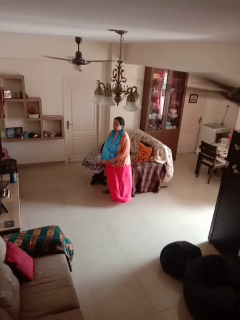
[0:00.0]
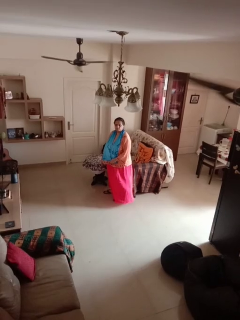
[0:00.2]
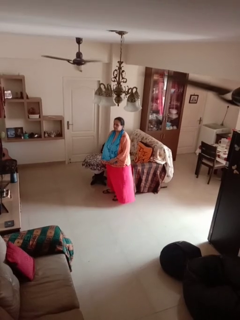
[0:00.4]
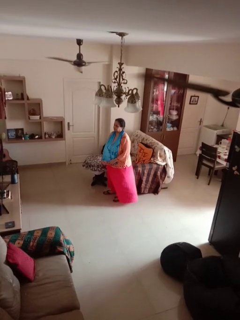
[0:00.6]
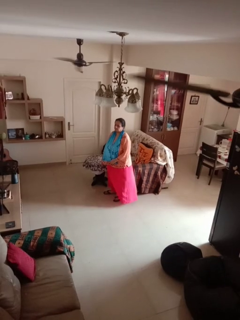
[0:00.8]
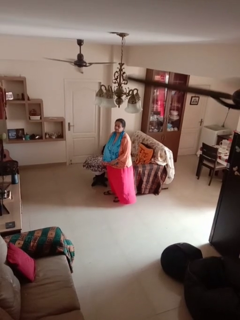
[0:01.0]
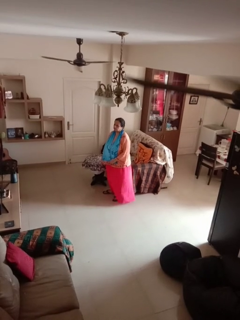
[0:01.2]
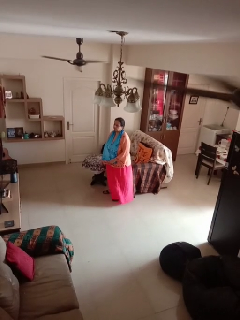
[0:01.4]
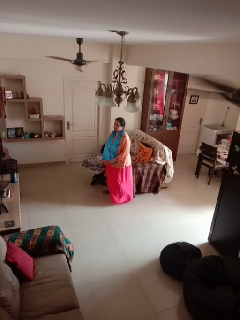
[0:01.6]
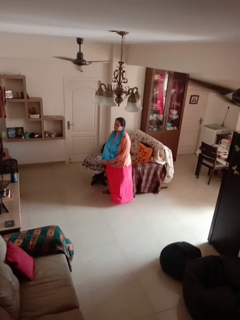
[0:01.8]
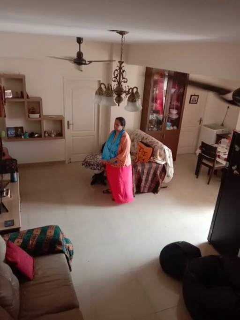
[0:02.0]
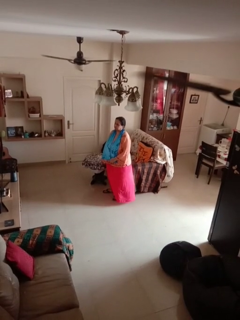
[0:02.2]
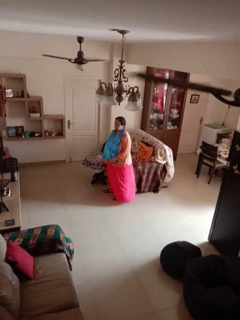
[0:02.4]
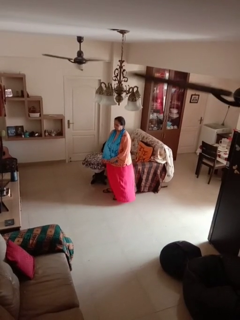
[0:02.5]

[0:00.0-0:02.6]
person shakes head

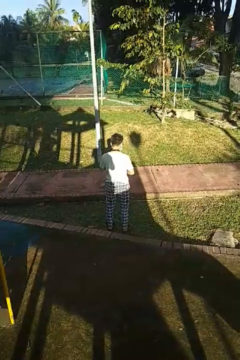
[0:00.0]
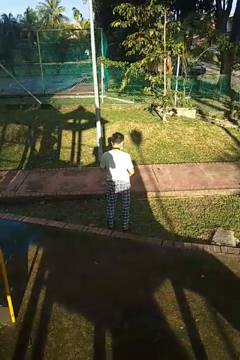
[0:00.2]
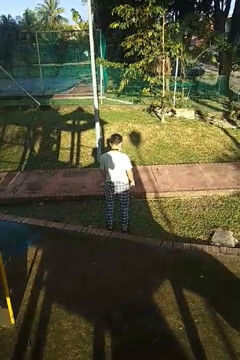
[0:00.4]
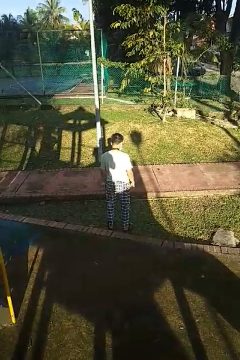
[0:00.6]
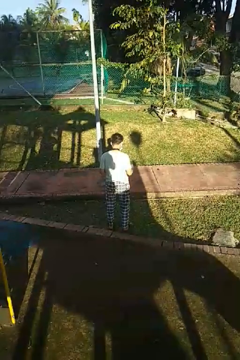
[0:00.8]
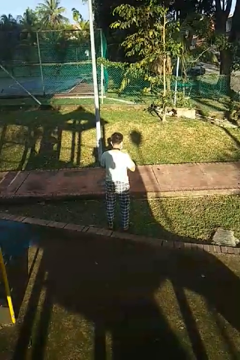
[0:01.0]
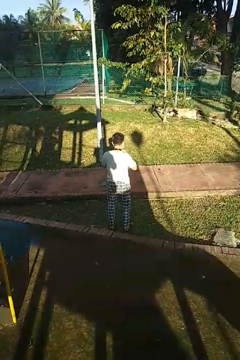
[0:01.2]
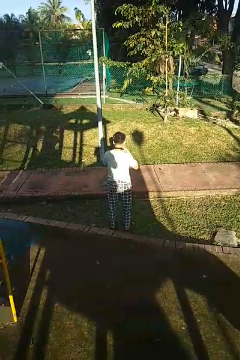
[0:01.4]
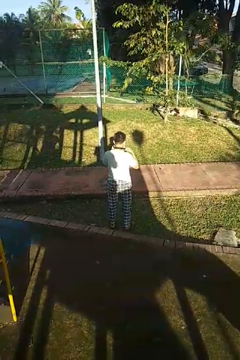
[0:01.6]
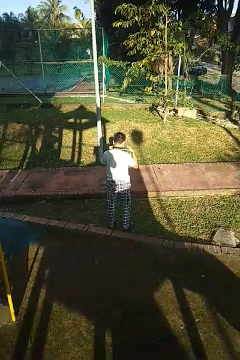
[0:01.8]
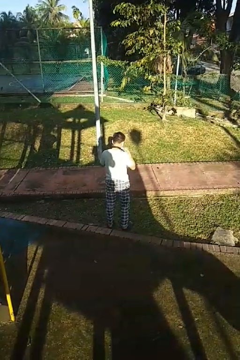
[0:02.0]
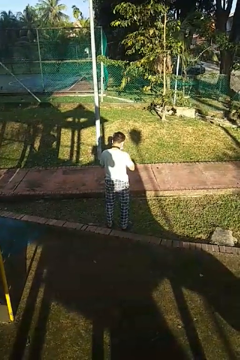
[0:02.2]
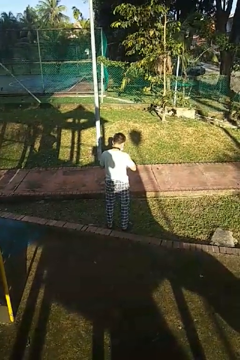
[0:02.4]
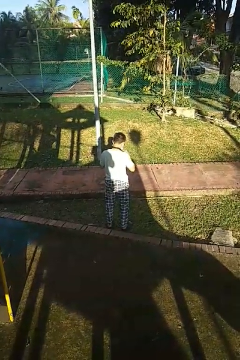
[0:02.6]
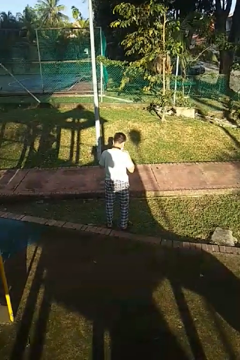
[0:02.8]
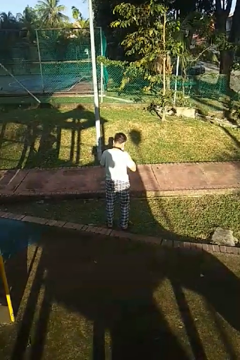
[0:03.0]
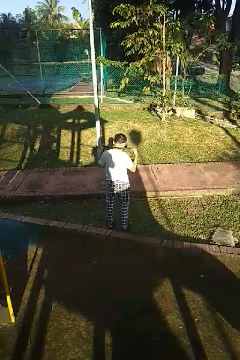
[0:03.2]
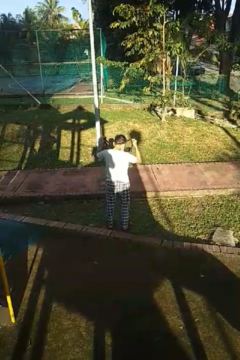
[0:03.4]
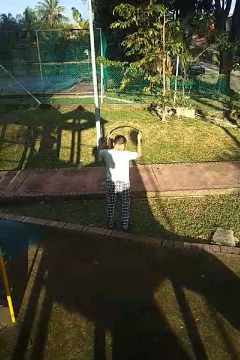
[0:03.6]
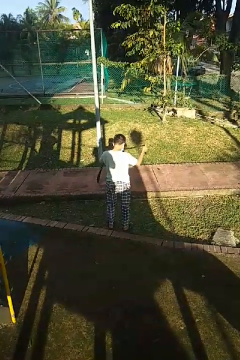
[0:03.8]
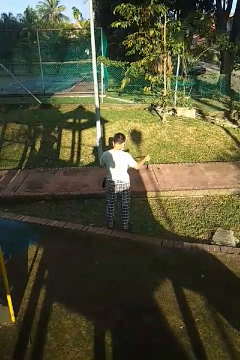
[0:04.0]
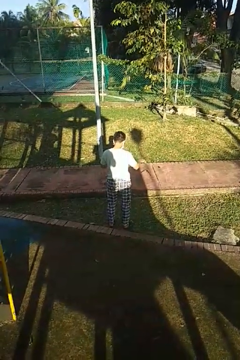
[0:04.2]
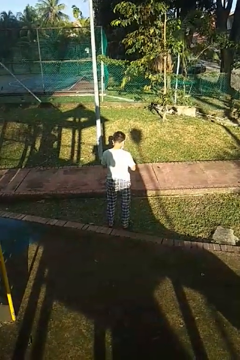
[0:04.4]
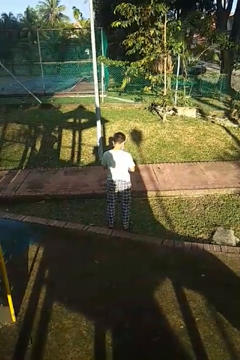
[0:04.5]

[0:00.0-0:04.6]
person takes off necktie

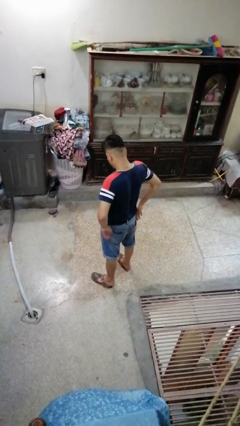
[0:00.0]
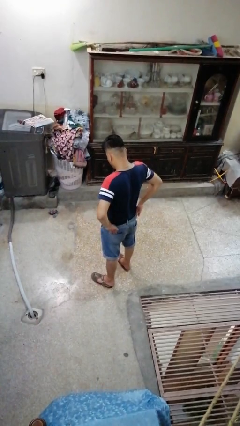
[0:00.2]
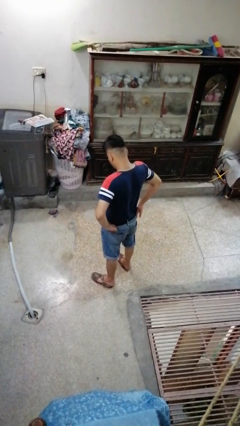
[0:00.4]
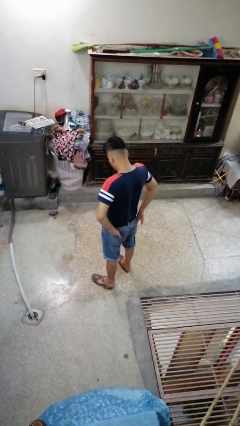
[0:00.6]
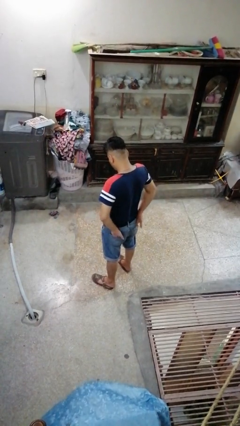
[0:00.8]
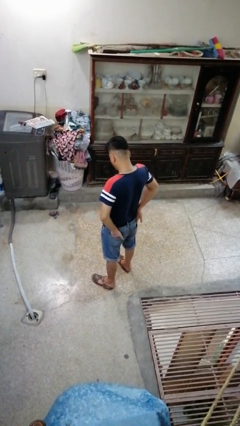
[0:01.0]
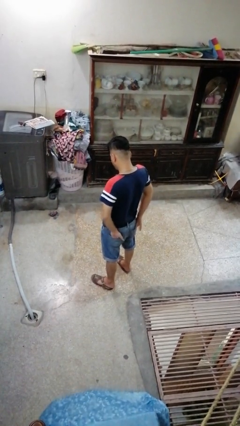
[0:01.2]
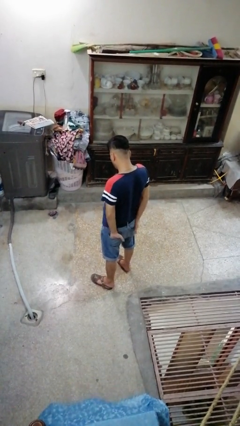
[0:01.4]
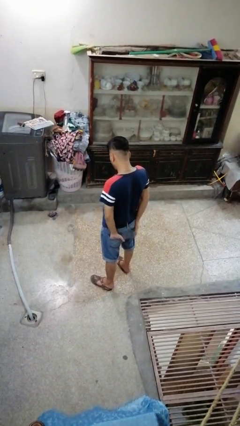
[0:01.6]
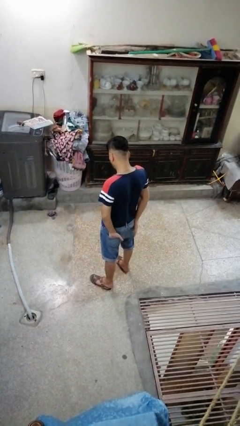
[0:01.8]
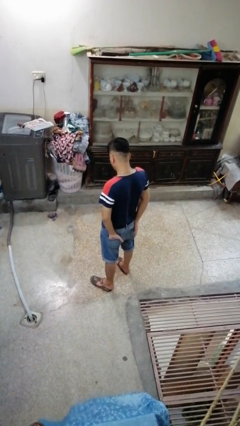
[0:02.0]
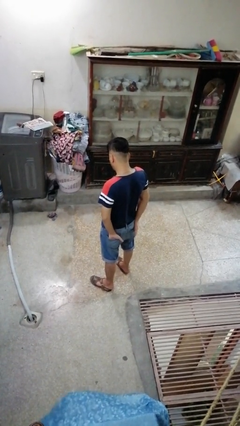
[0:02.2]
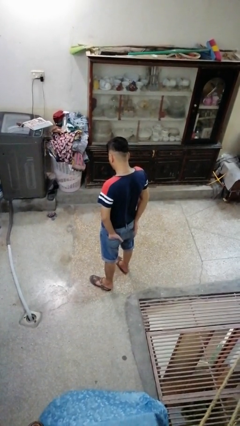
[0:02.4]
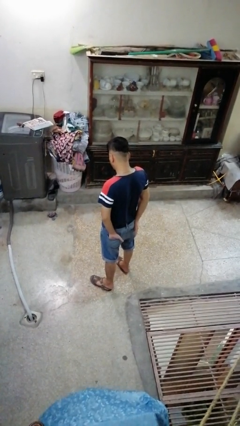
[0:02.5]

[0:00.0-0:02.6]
person puts hands in back pockets

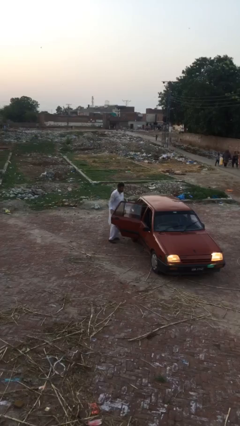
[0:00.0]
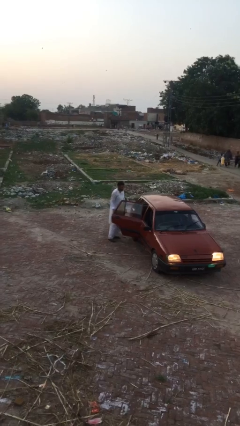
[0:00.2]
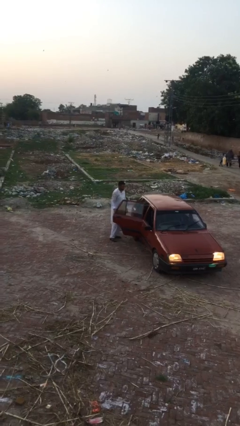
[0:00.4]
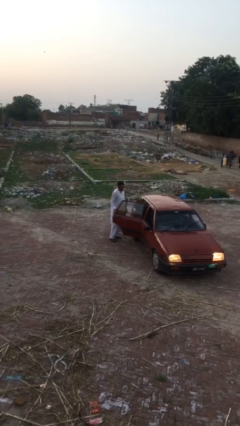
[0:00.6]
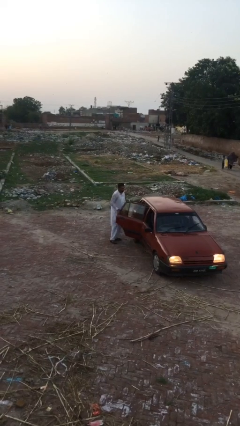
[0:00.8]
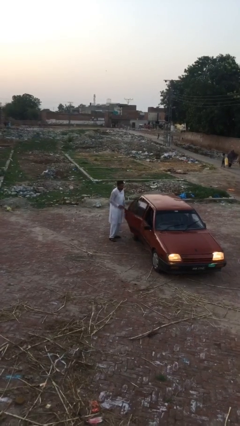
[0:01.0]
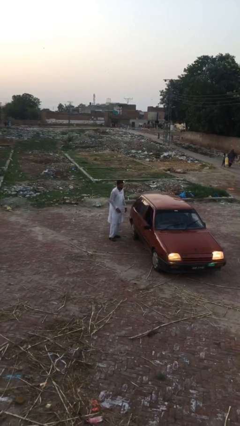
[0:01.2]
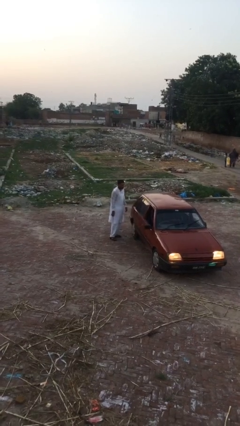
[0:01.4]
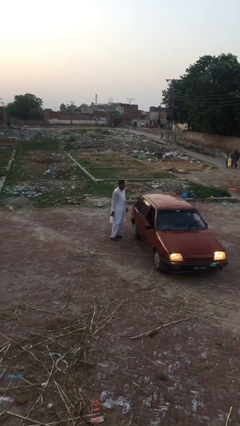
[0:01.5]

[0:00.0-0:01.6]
person closes car door

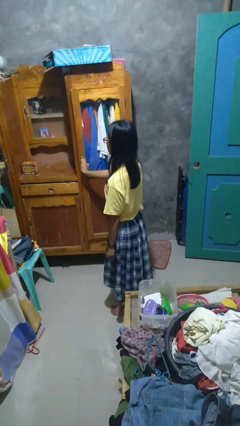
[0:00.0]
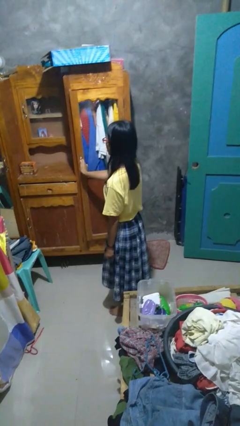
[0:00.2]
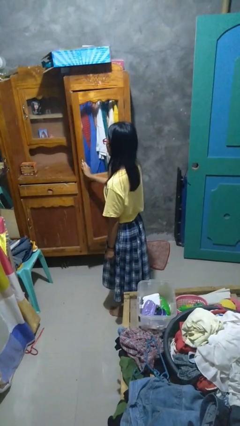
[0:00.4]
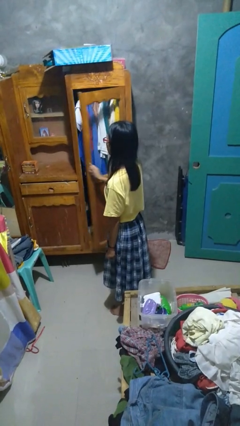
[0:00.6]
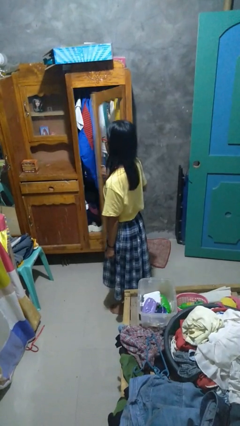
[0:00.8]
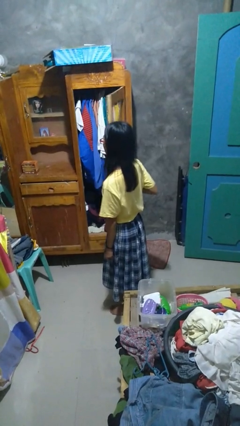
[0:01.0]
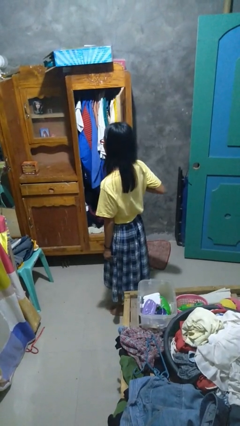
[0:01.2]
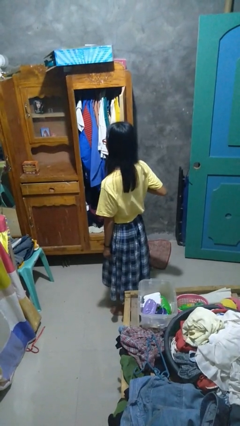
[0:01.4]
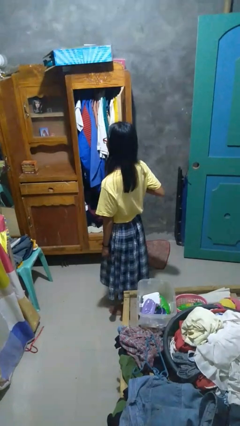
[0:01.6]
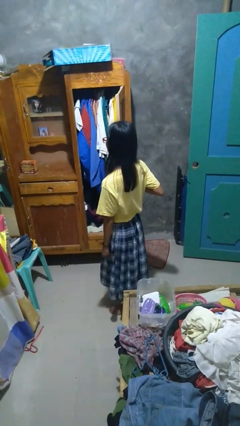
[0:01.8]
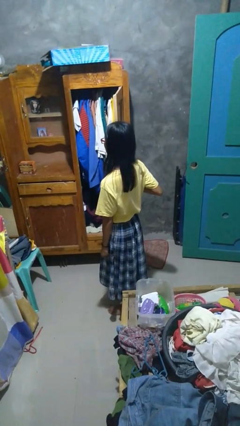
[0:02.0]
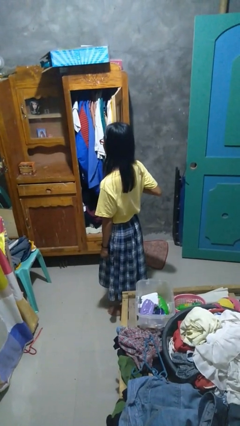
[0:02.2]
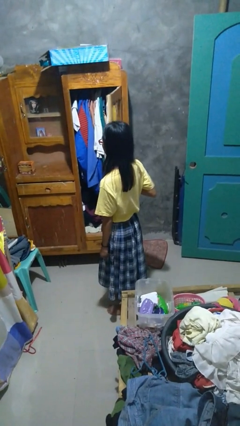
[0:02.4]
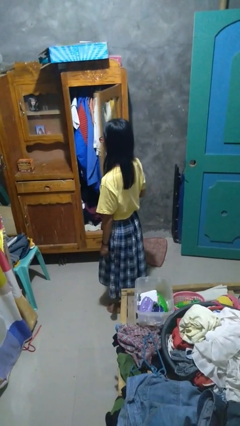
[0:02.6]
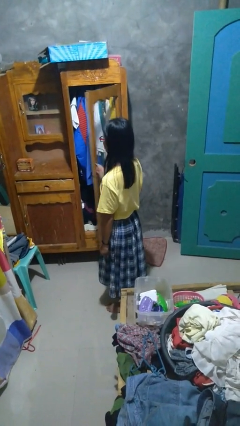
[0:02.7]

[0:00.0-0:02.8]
person opens closet door

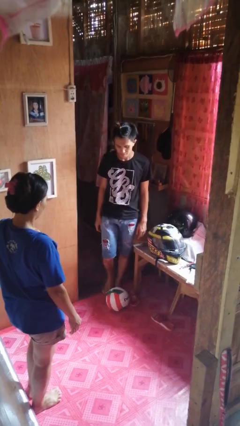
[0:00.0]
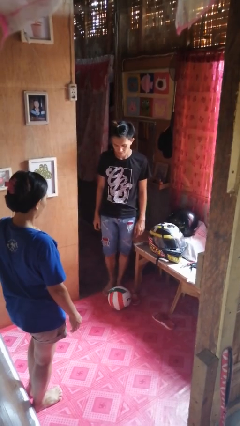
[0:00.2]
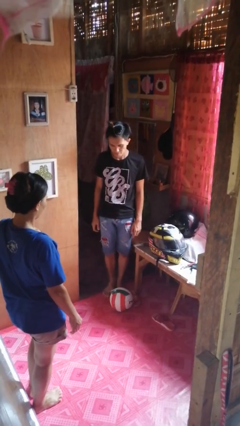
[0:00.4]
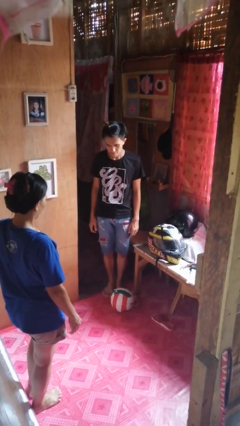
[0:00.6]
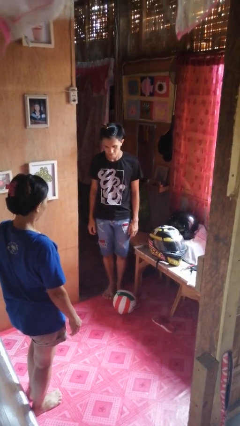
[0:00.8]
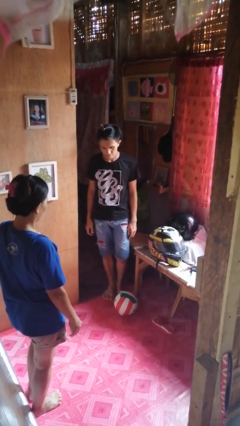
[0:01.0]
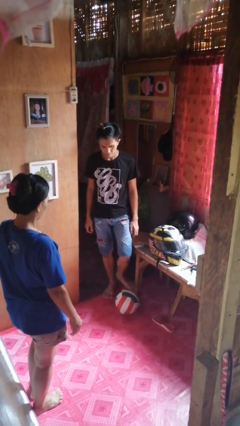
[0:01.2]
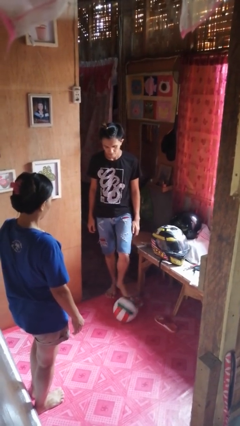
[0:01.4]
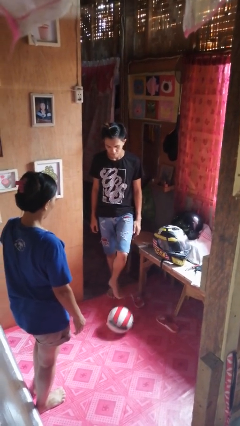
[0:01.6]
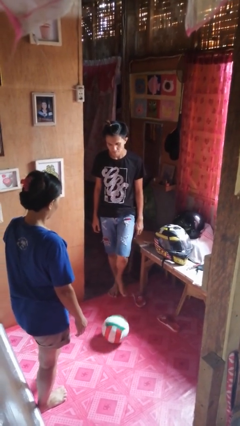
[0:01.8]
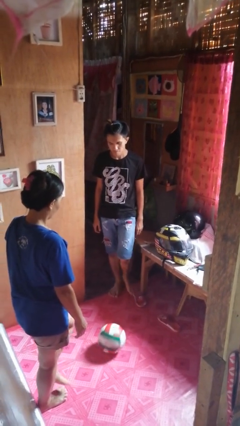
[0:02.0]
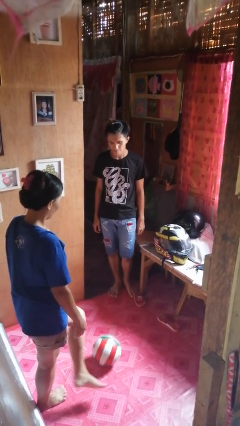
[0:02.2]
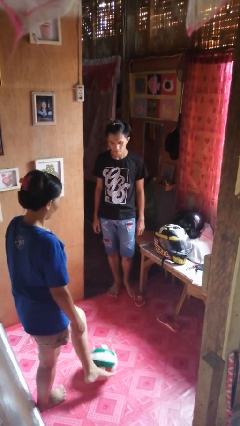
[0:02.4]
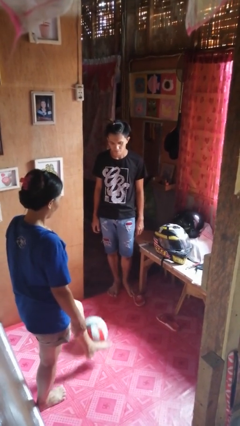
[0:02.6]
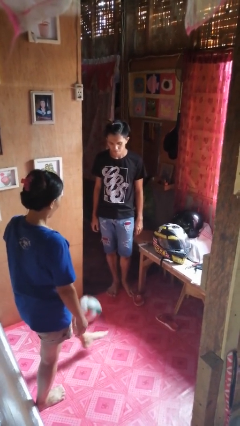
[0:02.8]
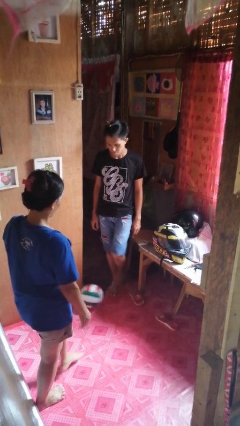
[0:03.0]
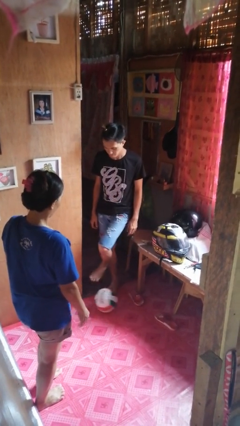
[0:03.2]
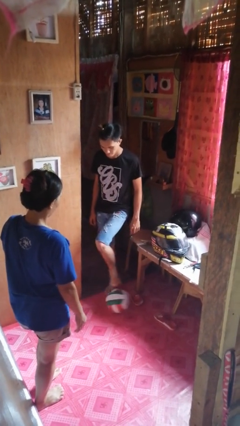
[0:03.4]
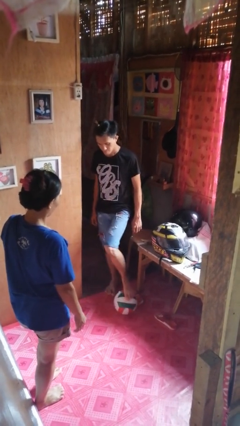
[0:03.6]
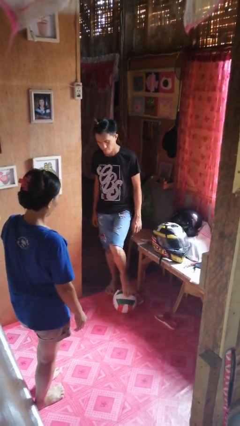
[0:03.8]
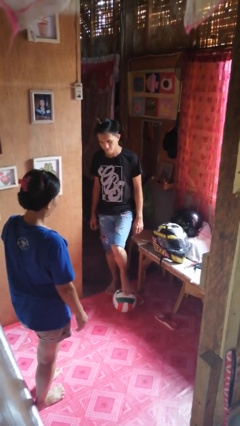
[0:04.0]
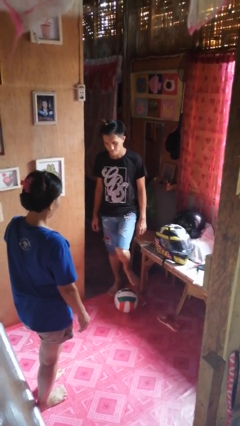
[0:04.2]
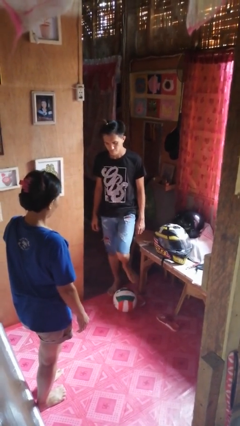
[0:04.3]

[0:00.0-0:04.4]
person kicks object to person

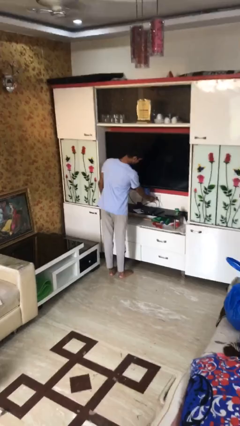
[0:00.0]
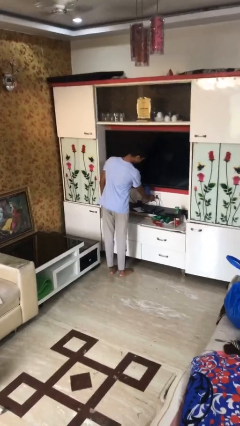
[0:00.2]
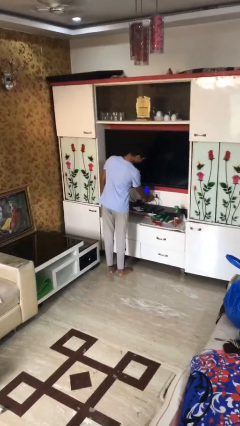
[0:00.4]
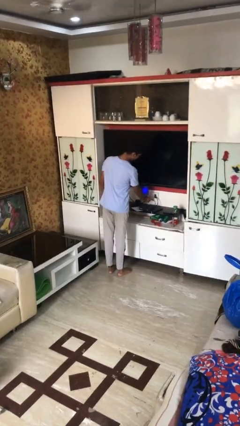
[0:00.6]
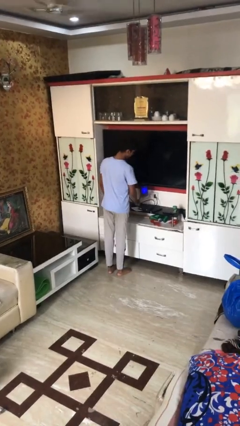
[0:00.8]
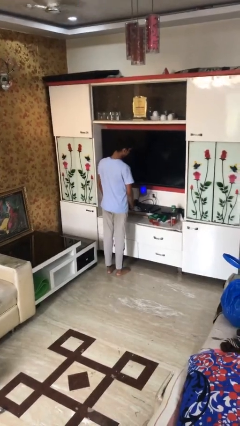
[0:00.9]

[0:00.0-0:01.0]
person turns on lamp
